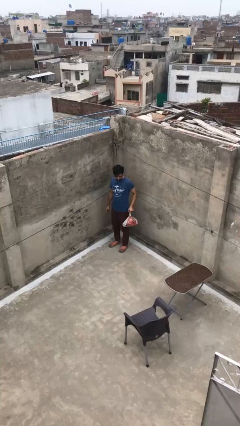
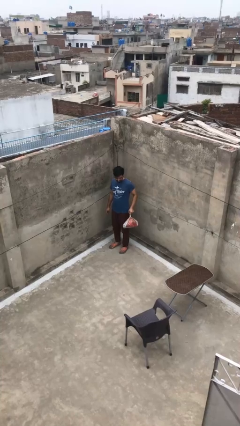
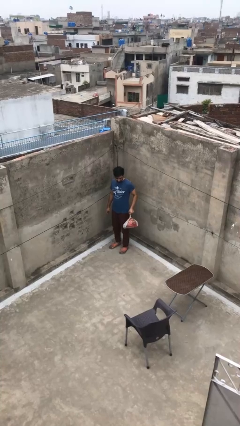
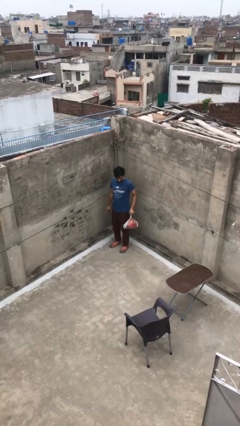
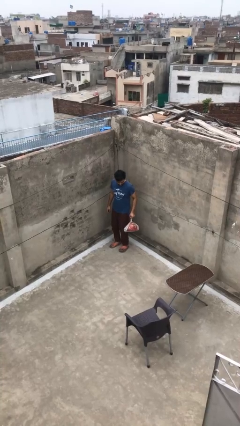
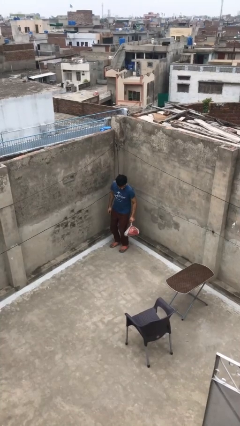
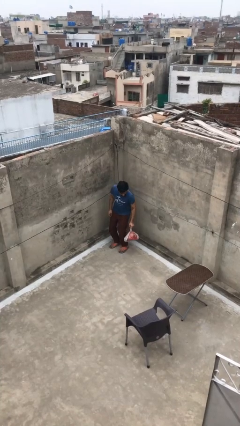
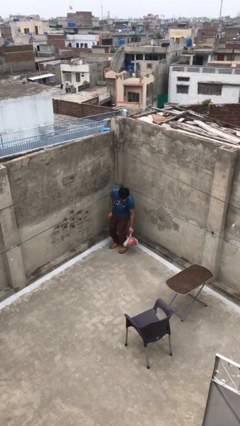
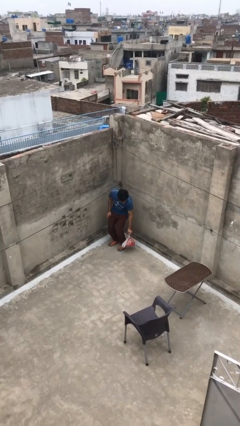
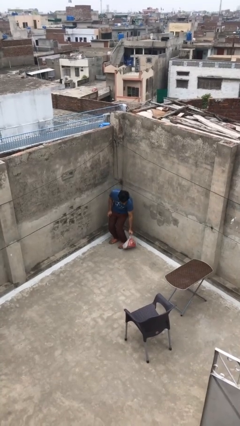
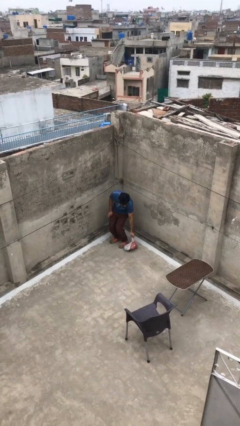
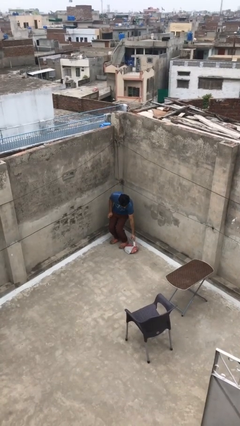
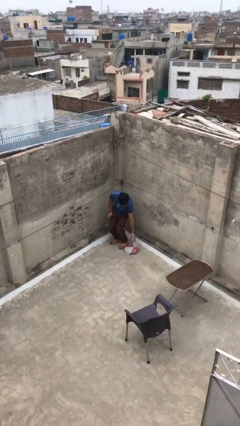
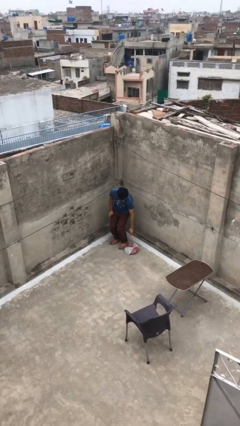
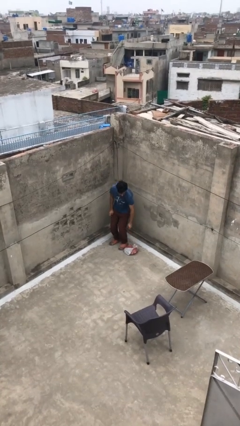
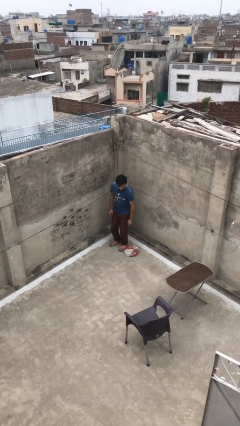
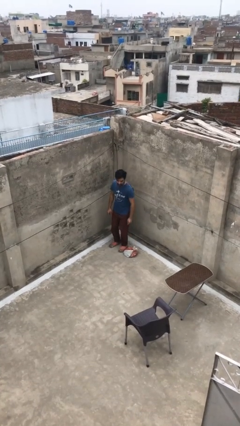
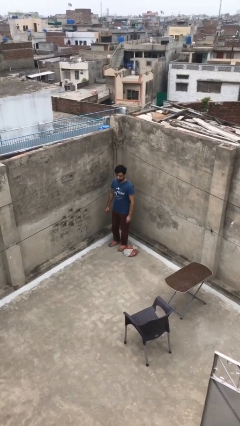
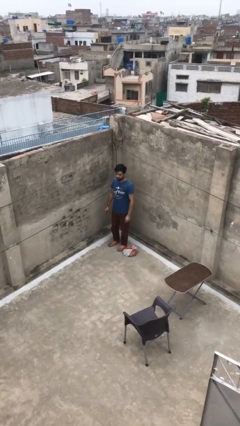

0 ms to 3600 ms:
person puts down object on floor

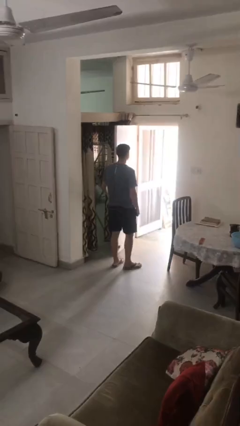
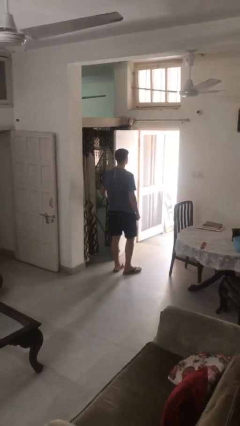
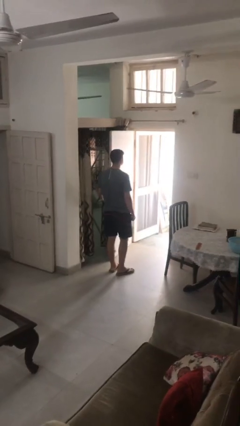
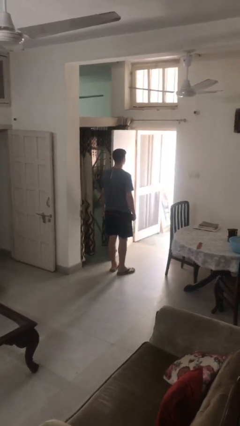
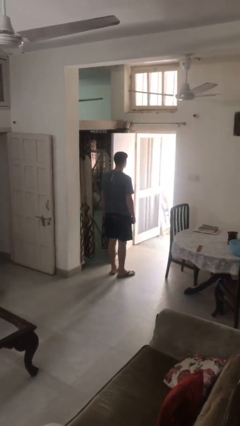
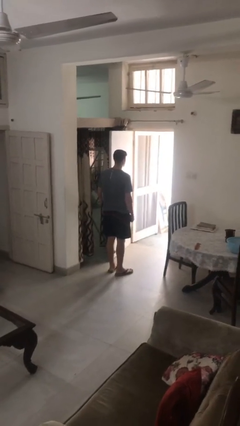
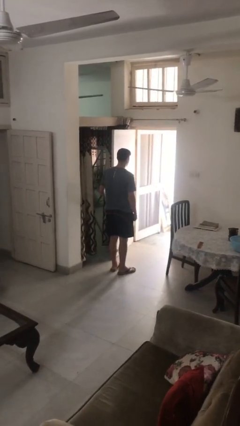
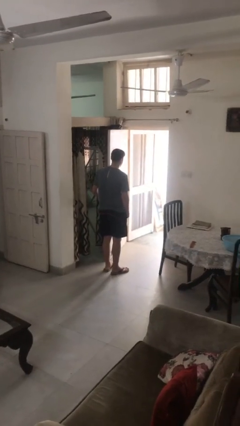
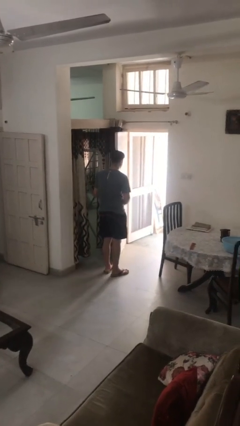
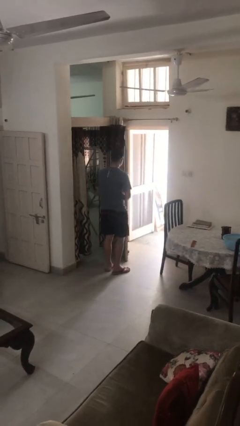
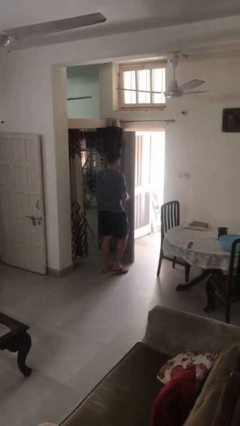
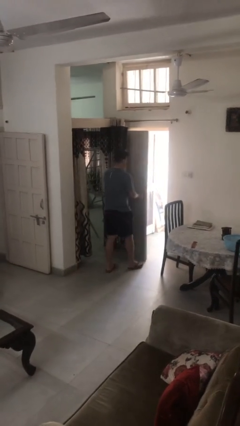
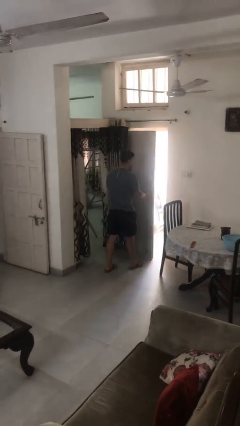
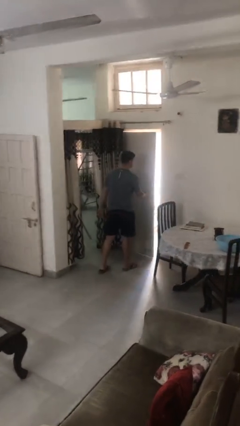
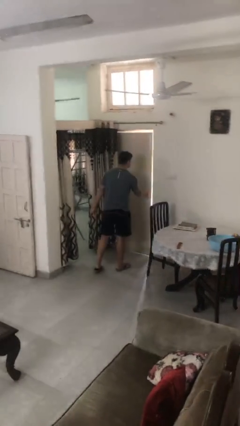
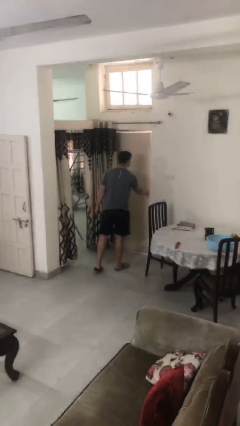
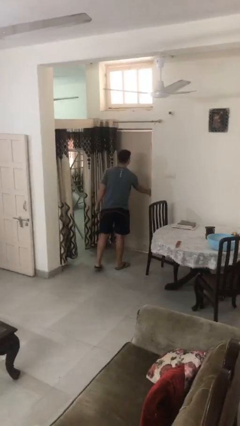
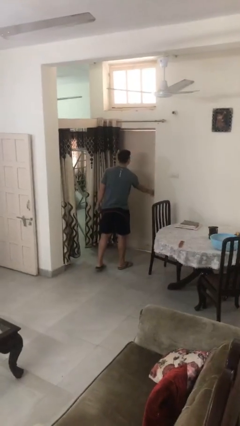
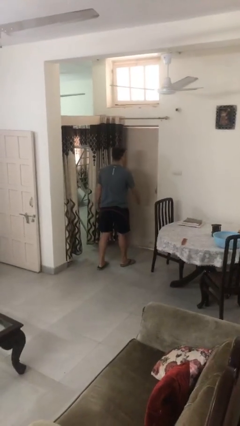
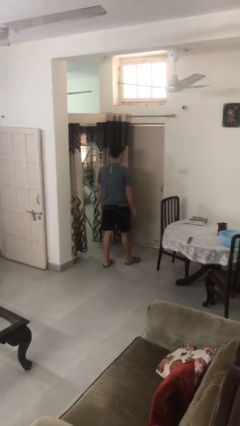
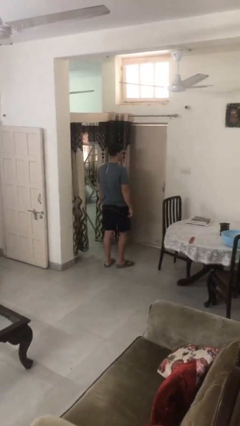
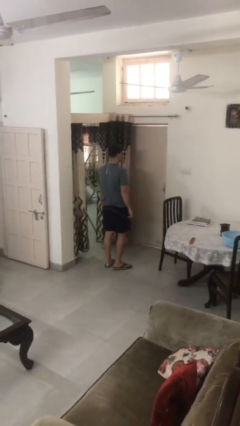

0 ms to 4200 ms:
person closes facility door

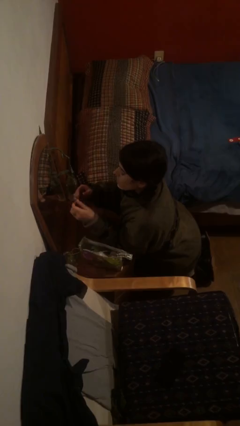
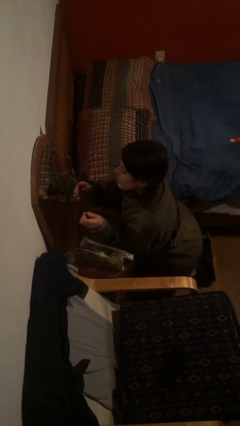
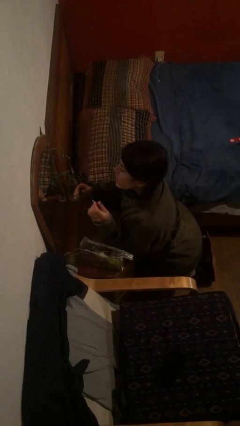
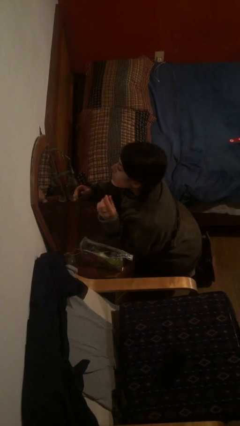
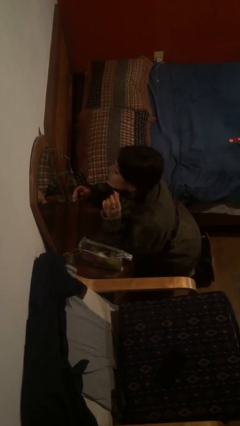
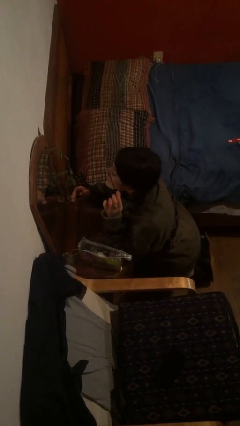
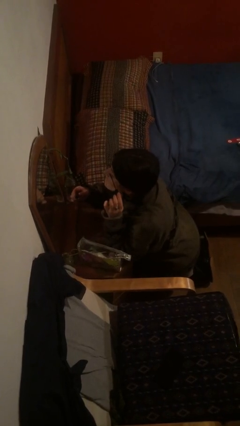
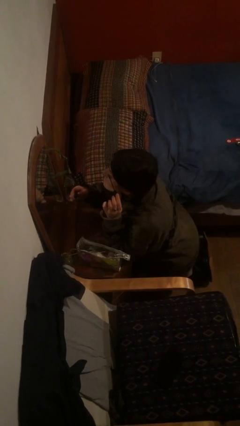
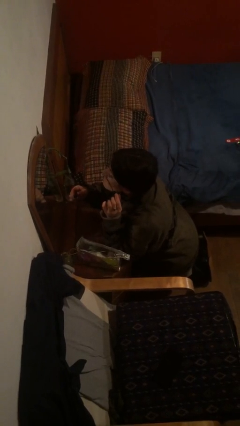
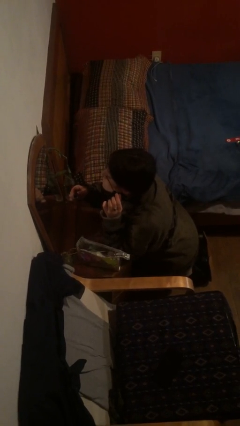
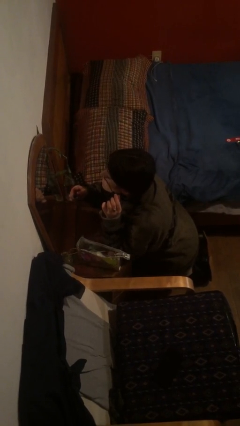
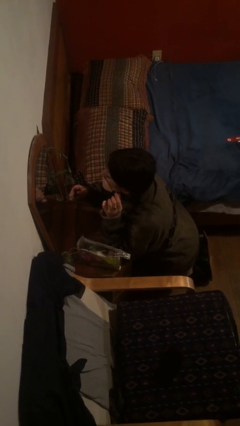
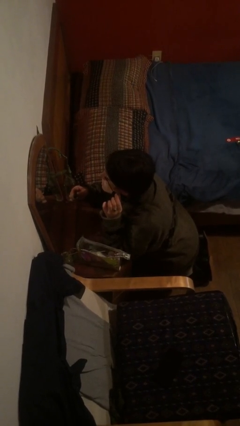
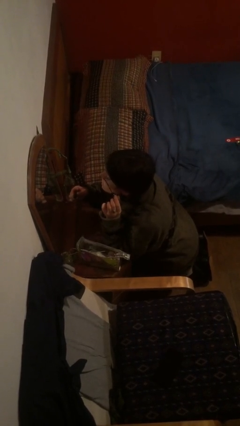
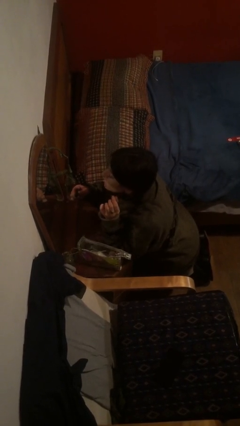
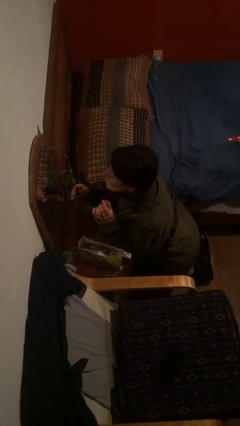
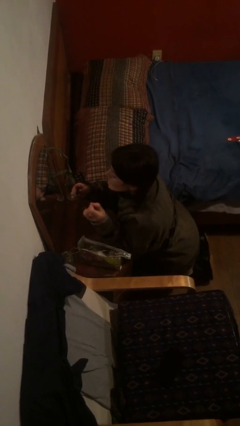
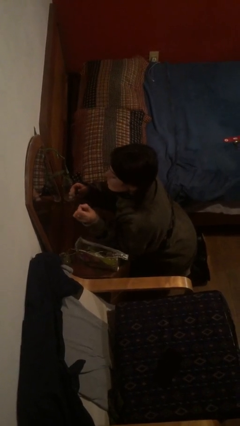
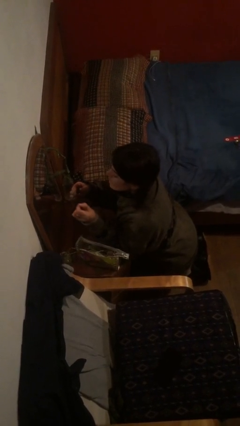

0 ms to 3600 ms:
person applies eye makeup

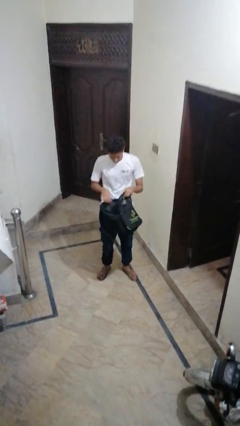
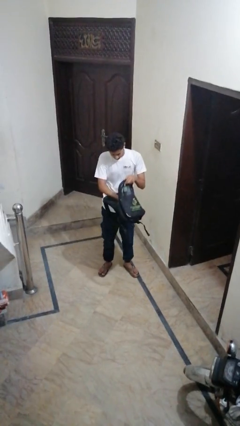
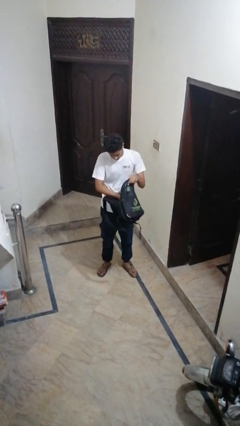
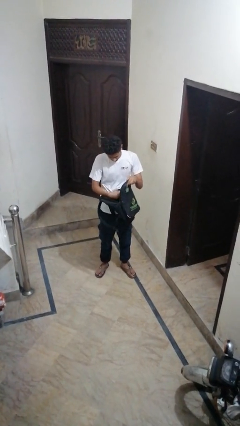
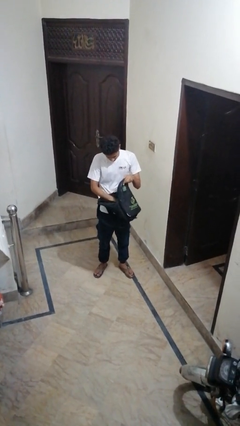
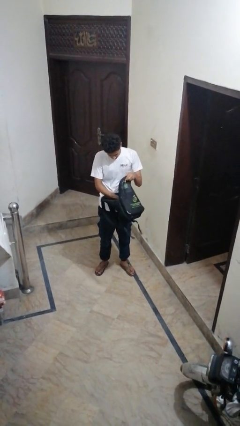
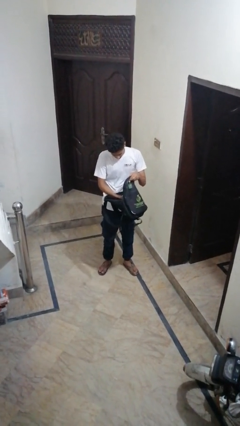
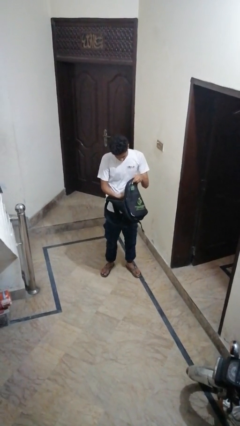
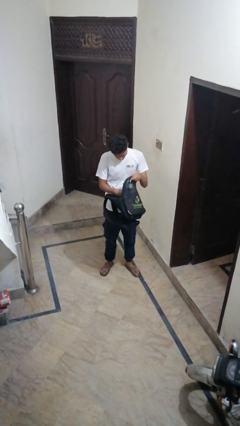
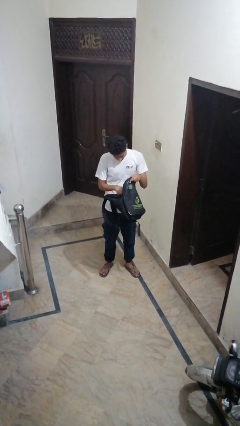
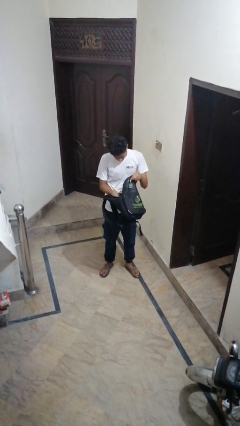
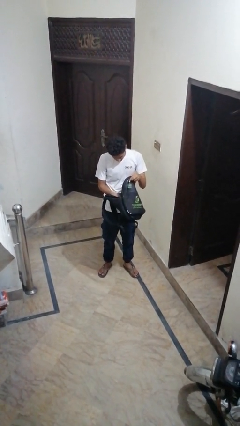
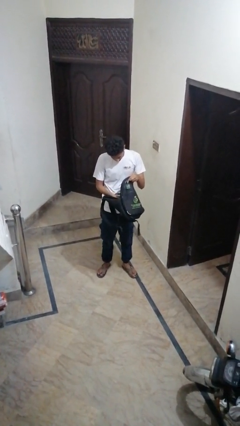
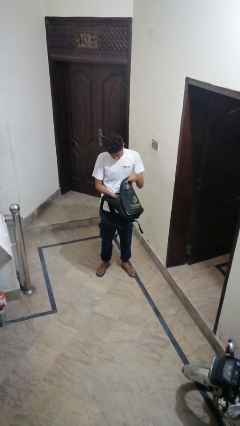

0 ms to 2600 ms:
person searches in backpack

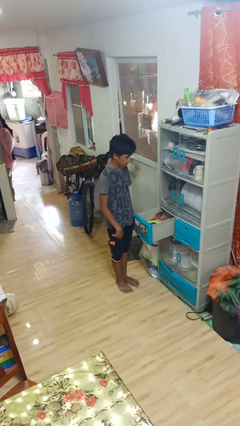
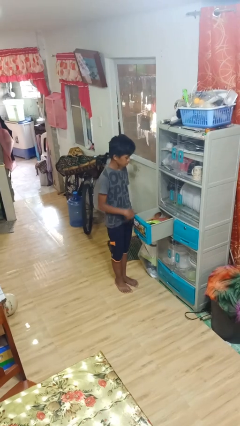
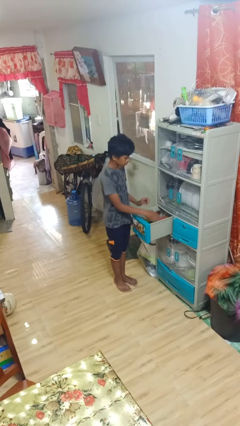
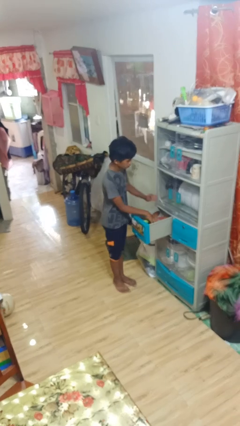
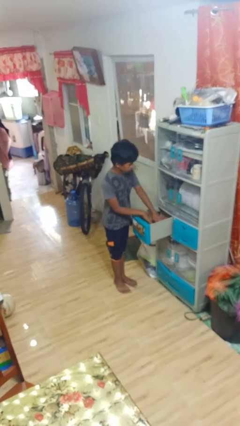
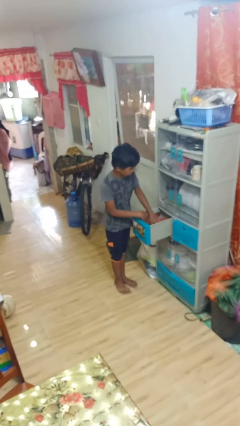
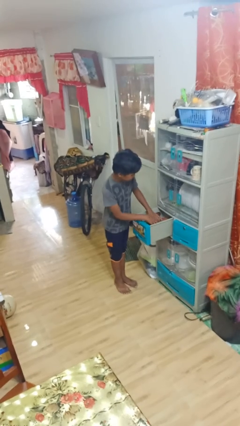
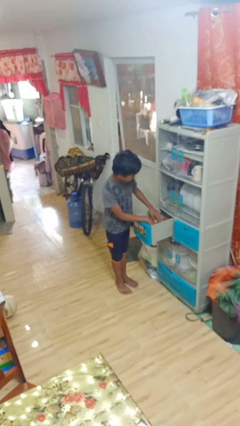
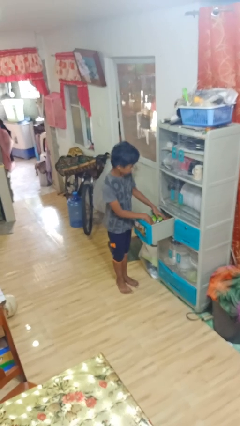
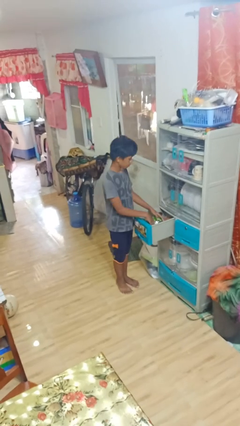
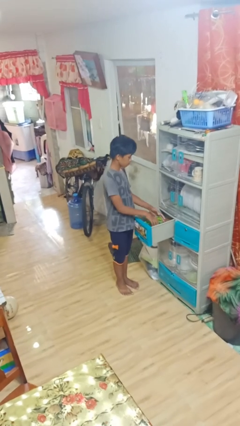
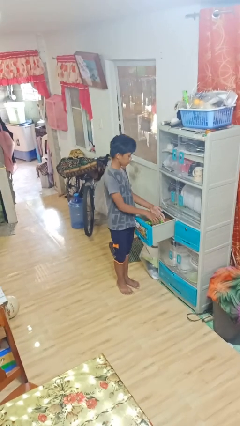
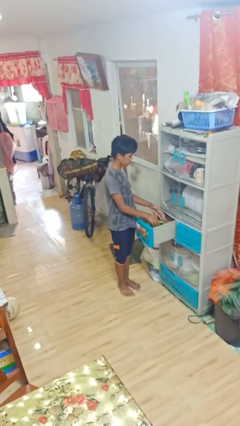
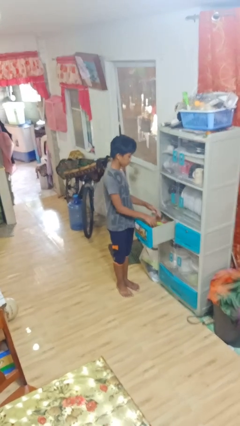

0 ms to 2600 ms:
person searches in kitchen drawer

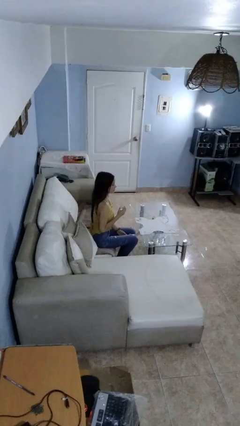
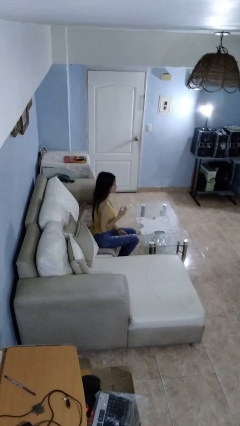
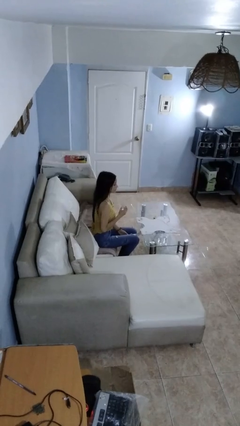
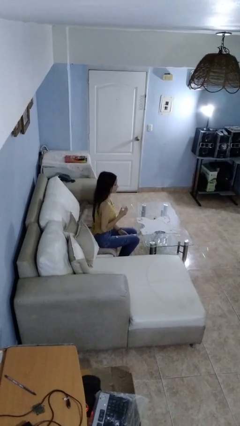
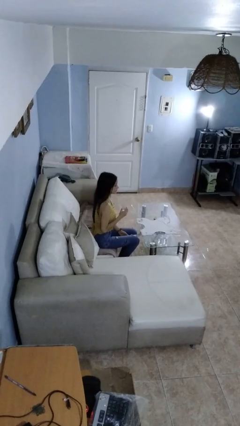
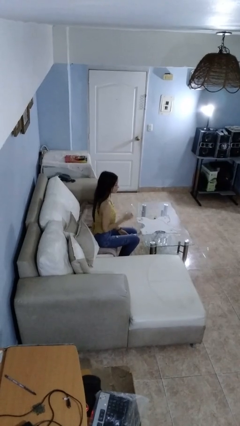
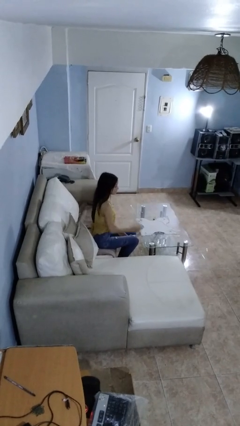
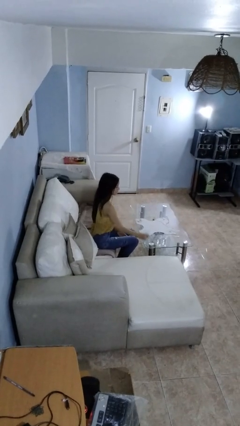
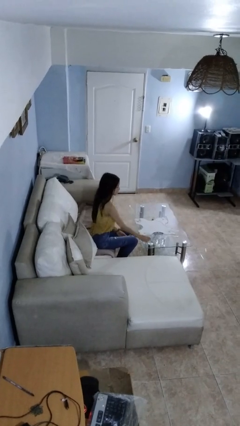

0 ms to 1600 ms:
person puts down object on table
